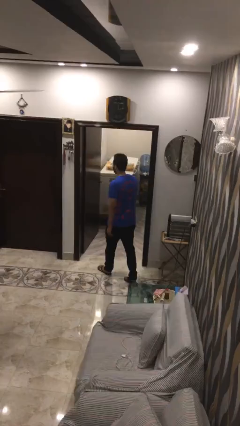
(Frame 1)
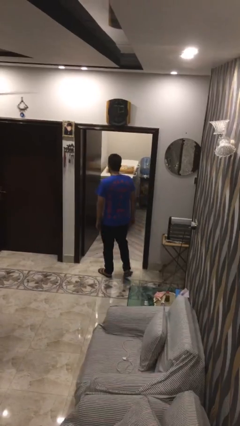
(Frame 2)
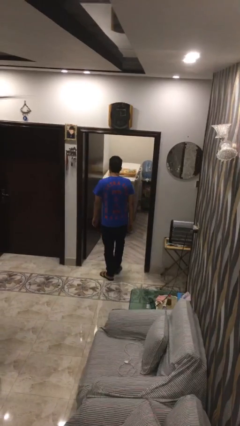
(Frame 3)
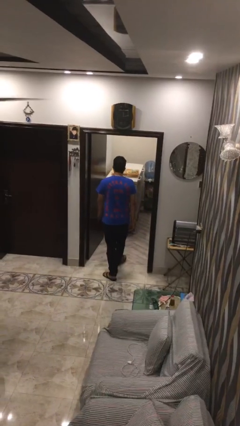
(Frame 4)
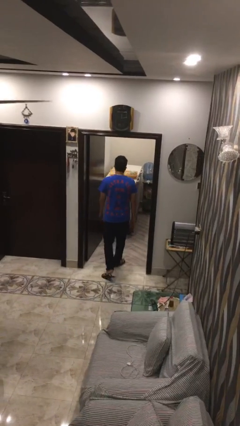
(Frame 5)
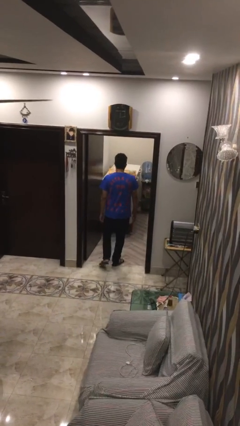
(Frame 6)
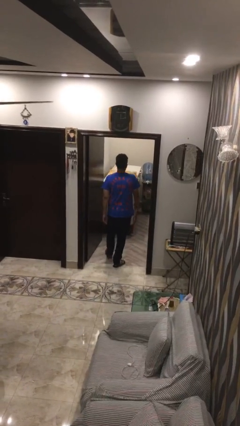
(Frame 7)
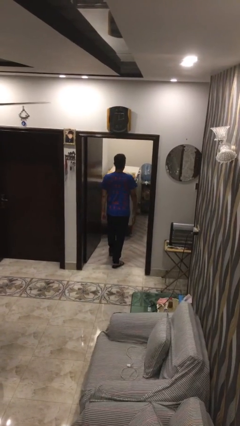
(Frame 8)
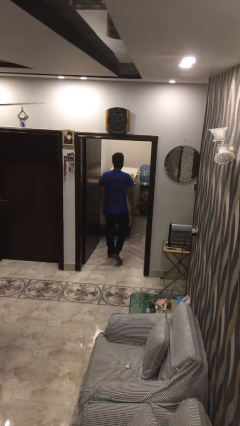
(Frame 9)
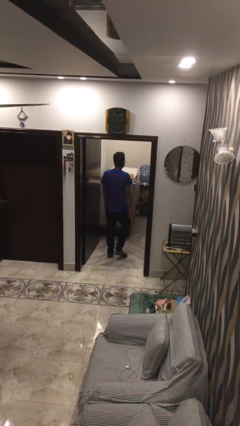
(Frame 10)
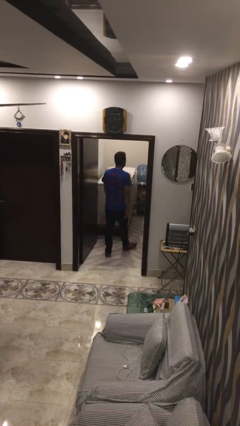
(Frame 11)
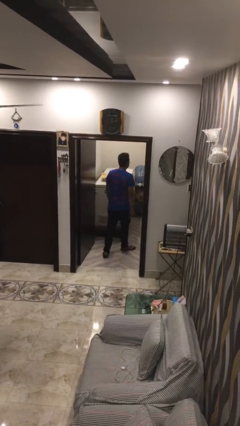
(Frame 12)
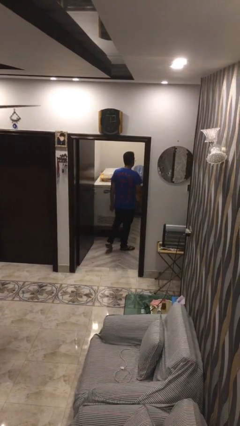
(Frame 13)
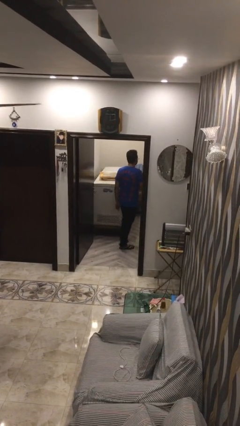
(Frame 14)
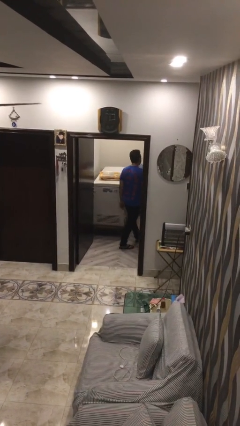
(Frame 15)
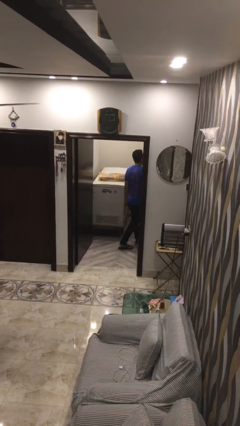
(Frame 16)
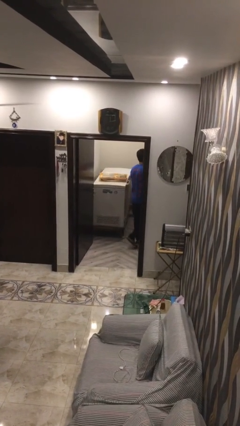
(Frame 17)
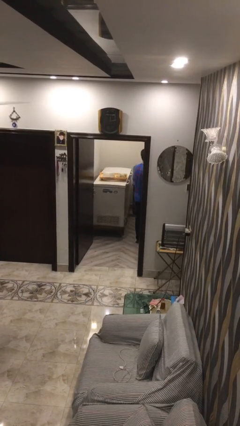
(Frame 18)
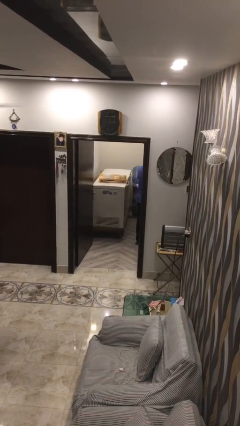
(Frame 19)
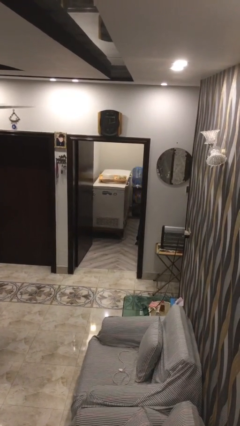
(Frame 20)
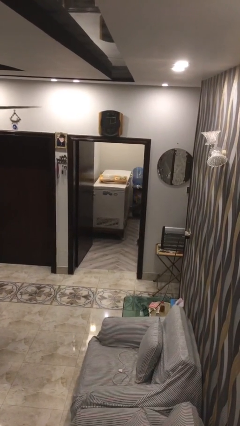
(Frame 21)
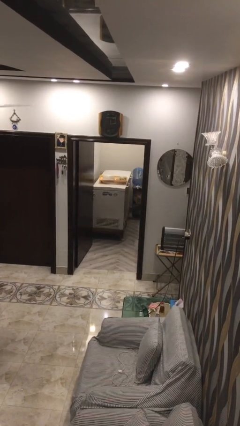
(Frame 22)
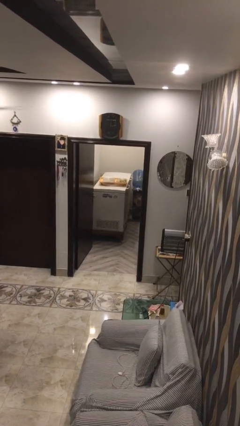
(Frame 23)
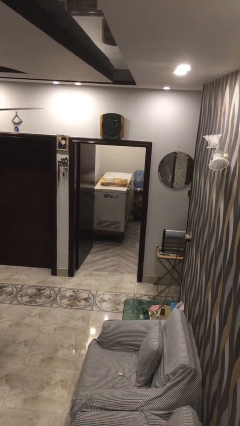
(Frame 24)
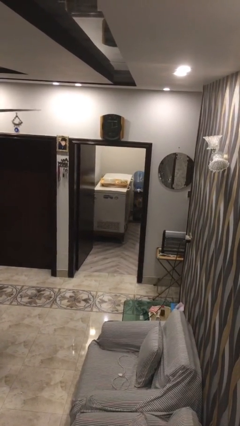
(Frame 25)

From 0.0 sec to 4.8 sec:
person exits scene through structure

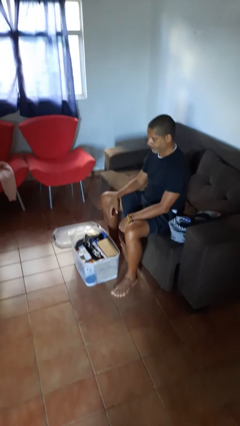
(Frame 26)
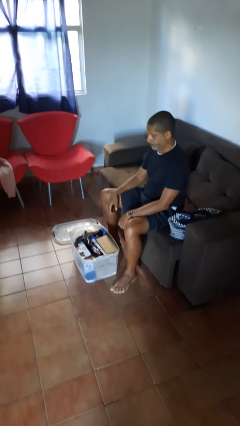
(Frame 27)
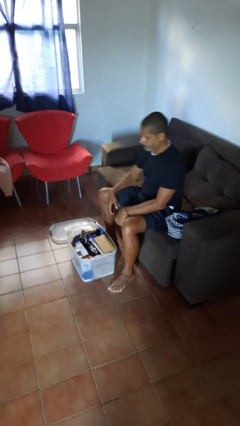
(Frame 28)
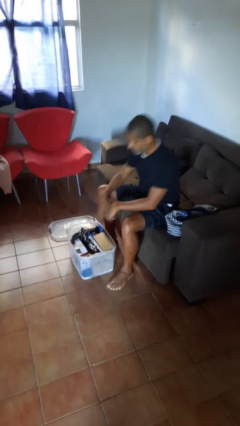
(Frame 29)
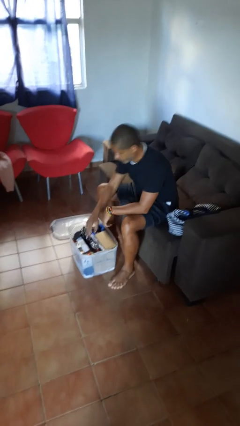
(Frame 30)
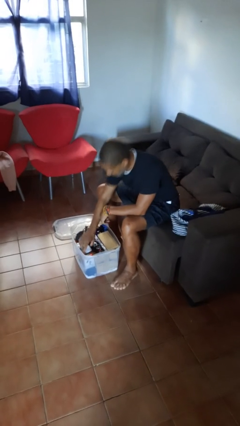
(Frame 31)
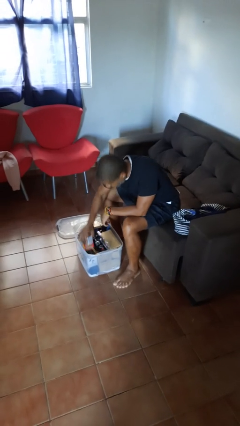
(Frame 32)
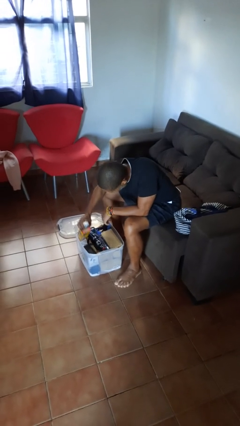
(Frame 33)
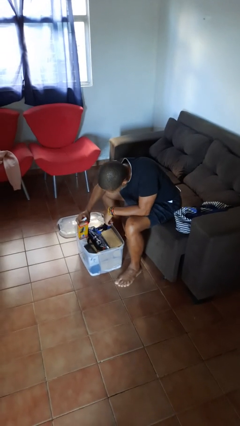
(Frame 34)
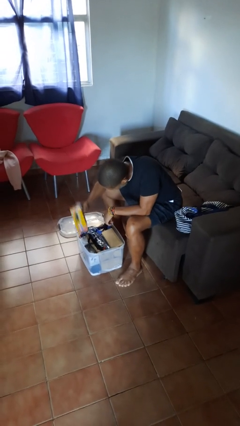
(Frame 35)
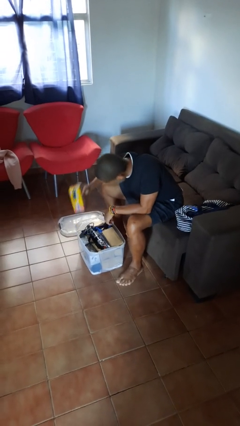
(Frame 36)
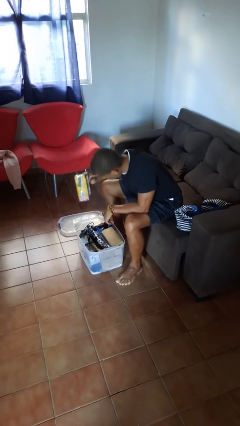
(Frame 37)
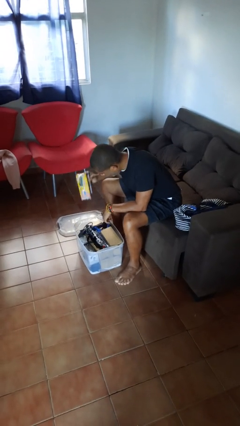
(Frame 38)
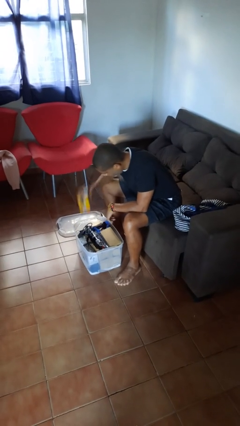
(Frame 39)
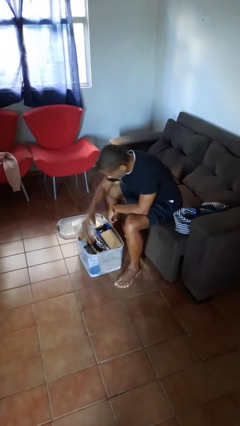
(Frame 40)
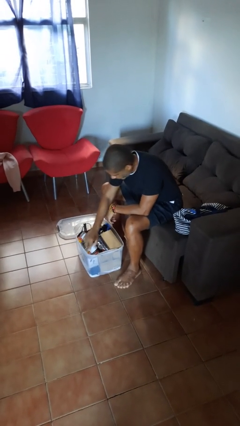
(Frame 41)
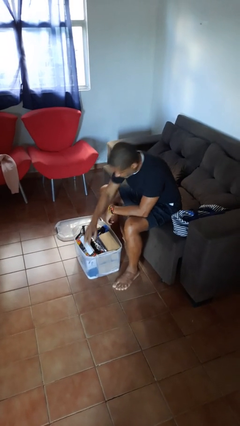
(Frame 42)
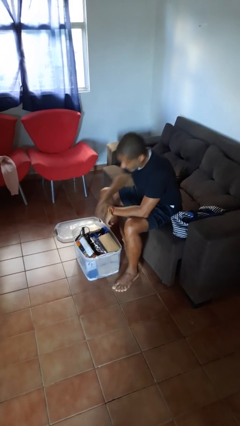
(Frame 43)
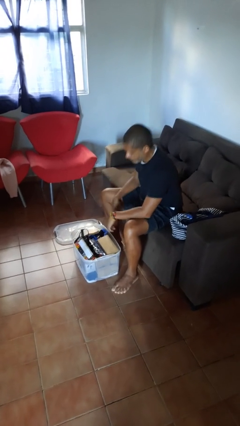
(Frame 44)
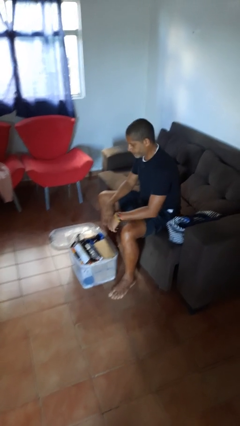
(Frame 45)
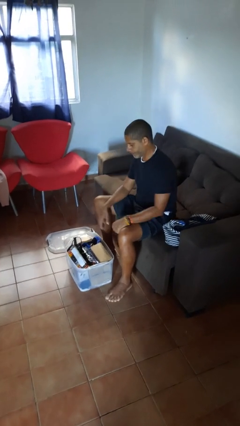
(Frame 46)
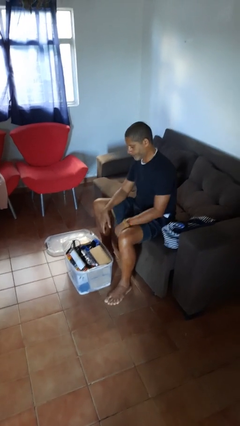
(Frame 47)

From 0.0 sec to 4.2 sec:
person searches in box

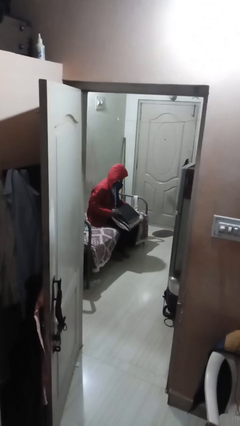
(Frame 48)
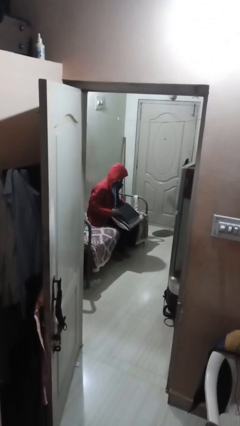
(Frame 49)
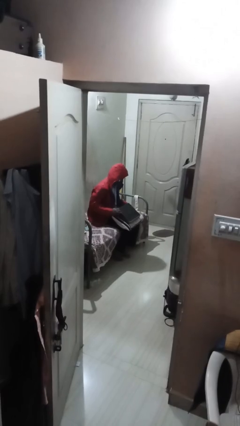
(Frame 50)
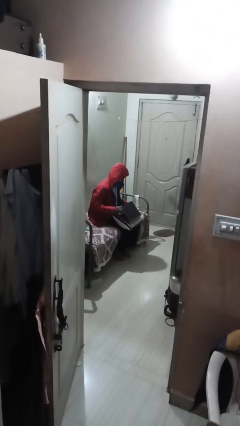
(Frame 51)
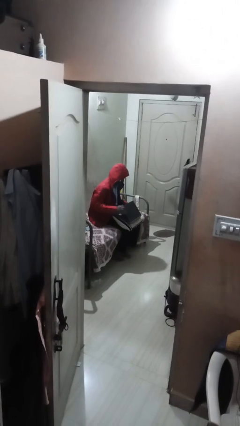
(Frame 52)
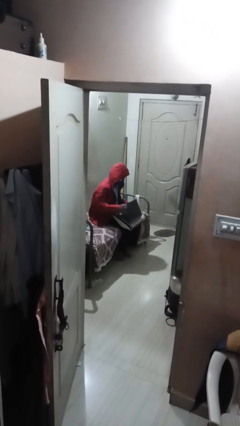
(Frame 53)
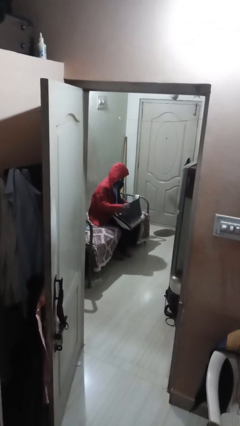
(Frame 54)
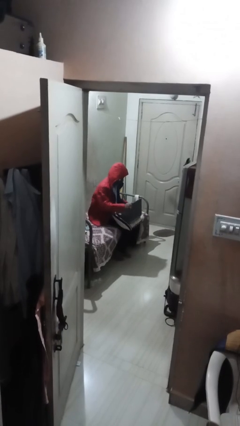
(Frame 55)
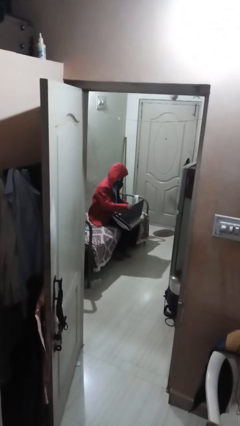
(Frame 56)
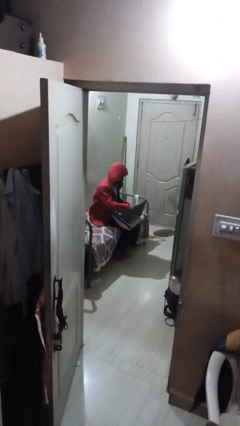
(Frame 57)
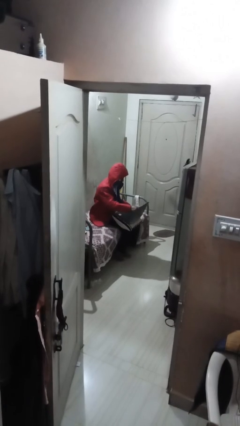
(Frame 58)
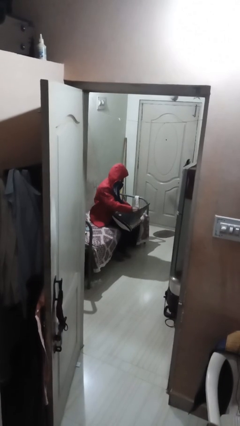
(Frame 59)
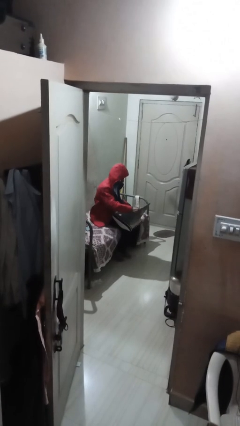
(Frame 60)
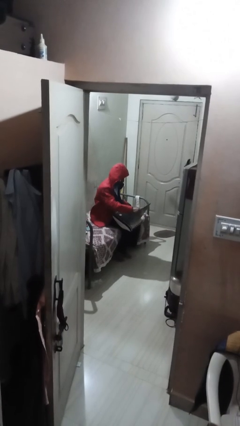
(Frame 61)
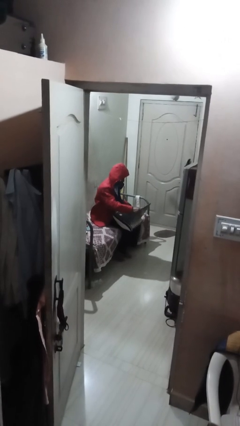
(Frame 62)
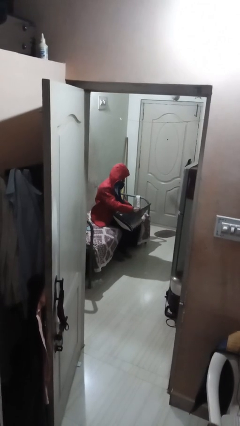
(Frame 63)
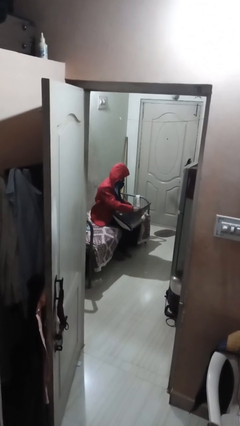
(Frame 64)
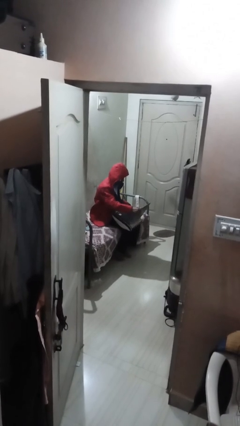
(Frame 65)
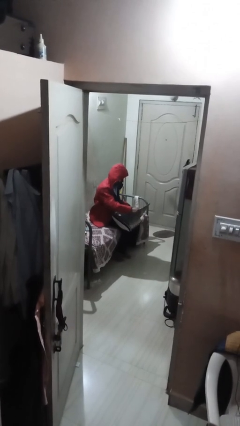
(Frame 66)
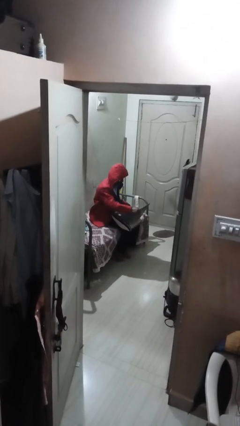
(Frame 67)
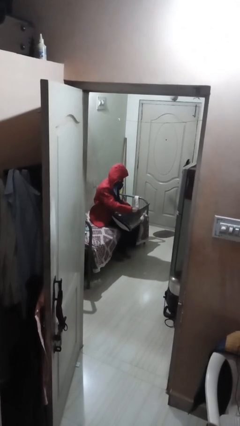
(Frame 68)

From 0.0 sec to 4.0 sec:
person interacts with laptop

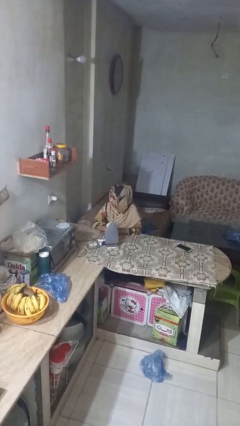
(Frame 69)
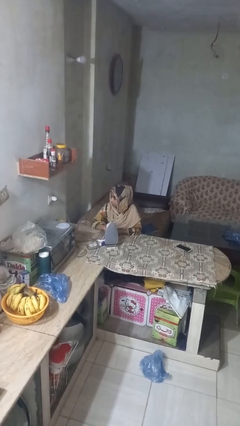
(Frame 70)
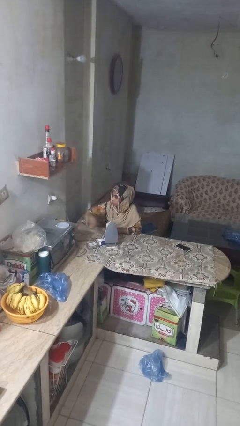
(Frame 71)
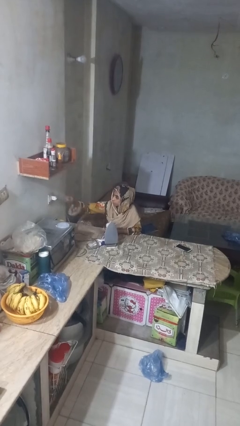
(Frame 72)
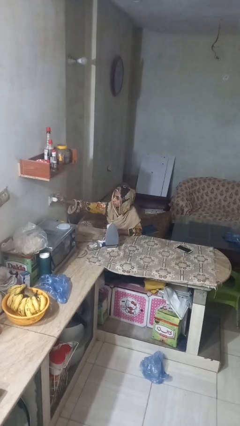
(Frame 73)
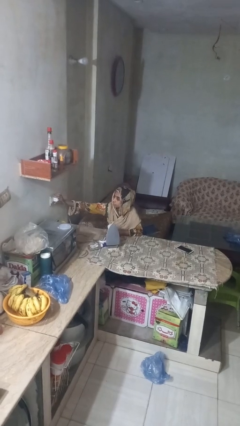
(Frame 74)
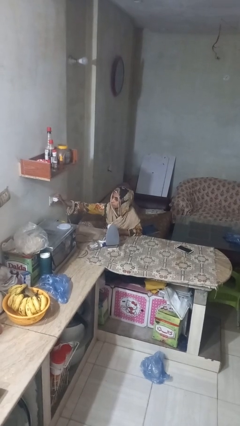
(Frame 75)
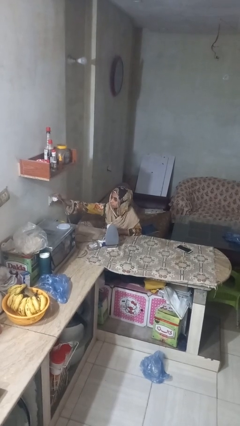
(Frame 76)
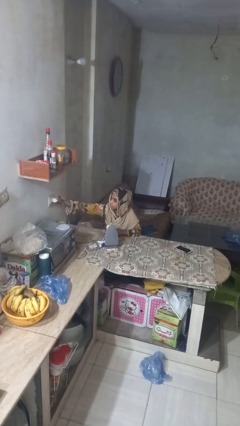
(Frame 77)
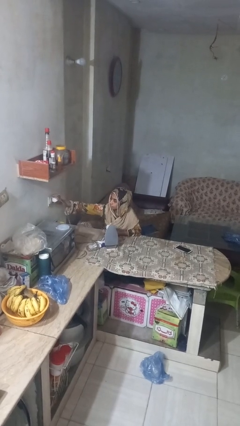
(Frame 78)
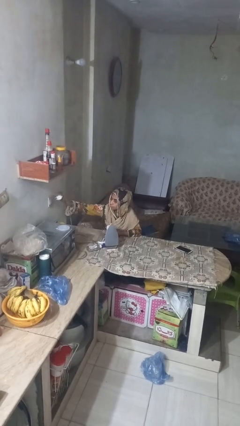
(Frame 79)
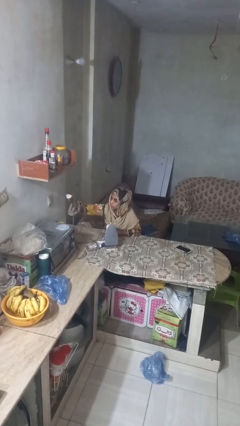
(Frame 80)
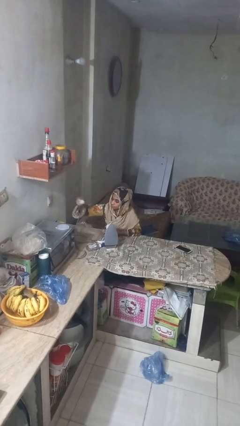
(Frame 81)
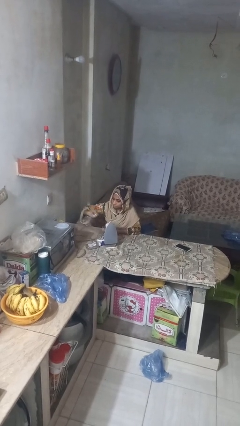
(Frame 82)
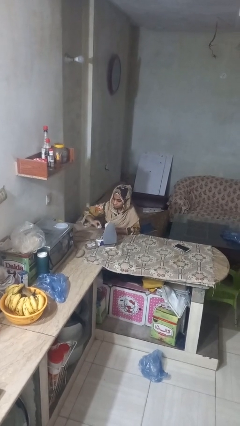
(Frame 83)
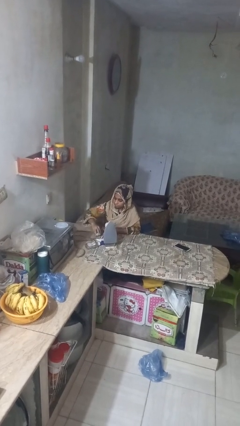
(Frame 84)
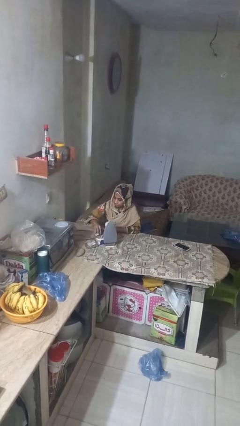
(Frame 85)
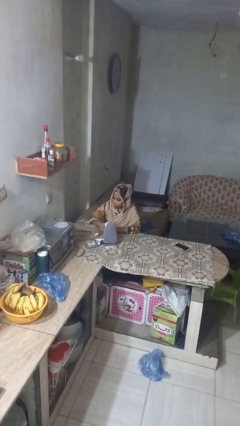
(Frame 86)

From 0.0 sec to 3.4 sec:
person unplugs from electrical socket

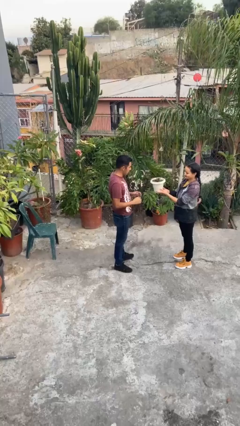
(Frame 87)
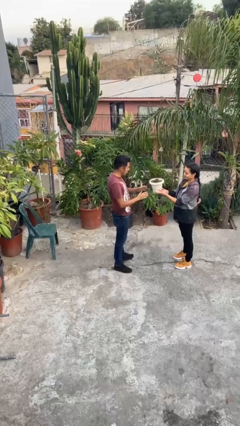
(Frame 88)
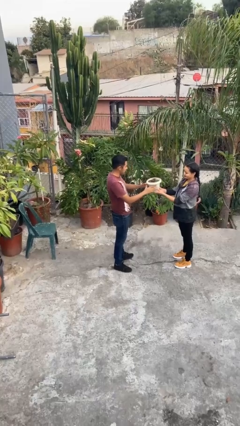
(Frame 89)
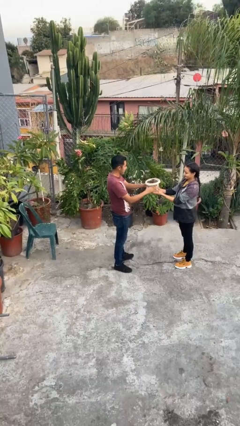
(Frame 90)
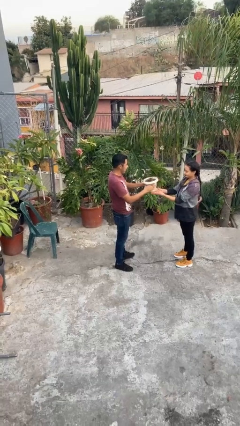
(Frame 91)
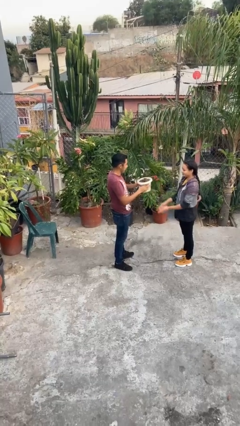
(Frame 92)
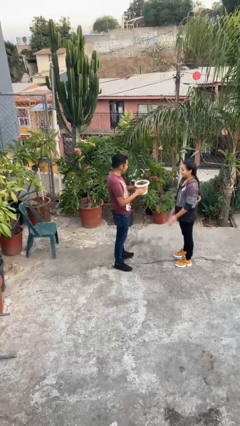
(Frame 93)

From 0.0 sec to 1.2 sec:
person transfers object to person
